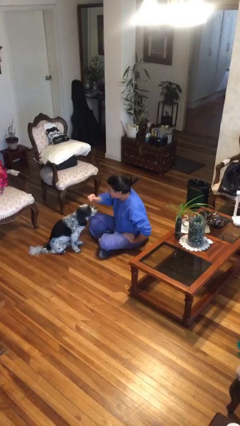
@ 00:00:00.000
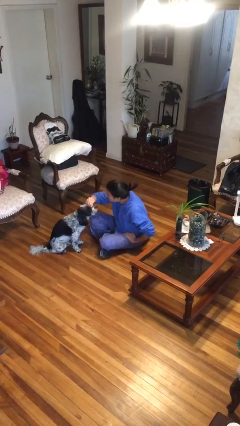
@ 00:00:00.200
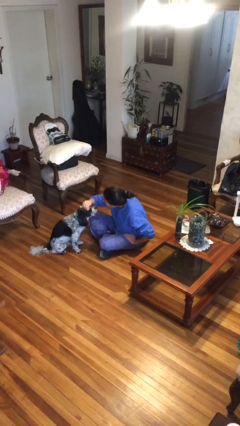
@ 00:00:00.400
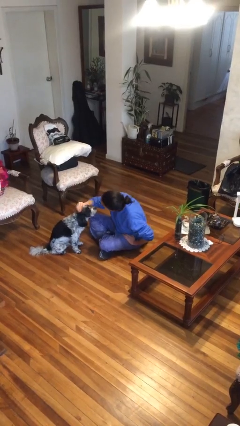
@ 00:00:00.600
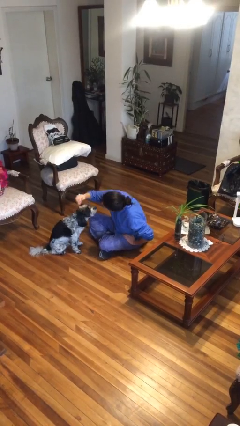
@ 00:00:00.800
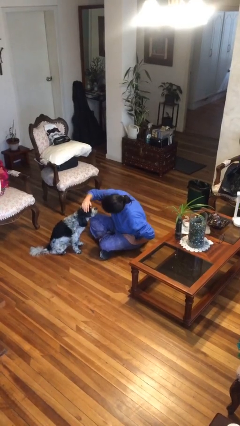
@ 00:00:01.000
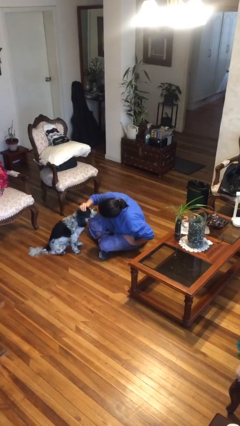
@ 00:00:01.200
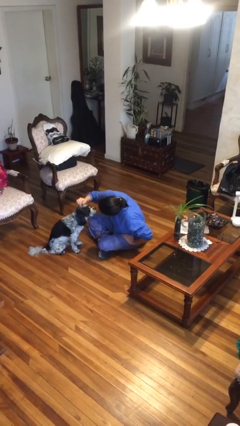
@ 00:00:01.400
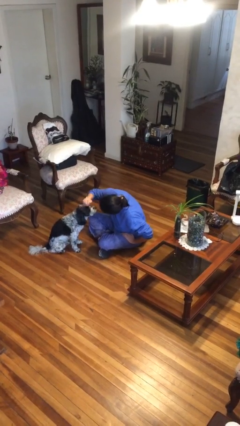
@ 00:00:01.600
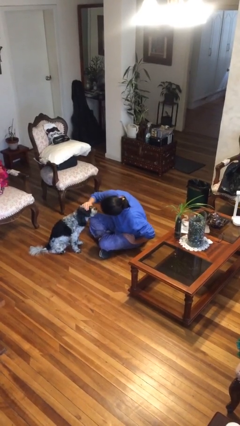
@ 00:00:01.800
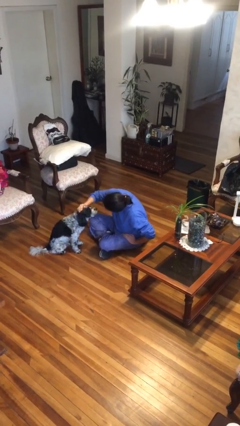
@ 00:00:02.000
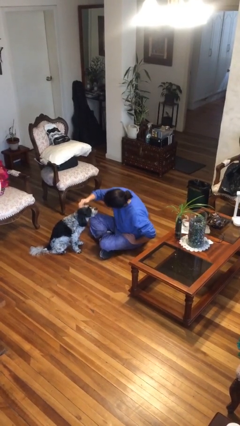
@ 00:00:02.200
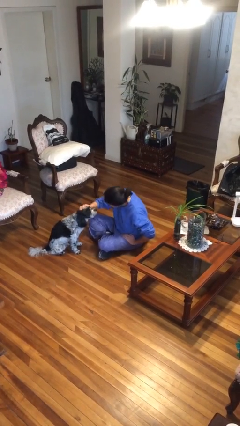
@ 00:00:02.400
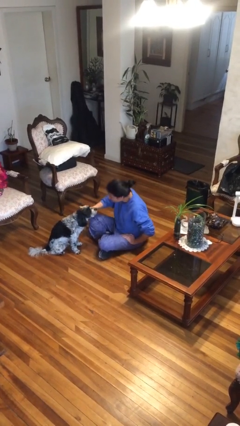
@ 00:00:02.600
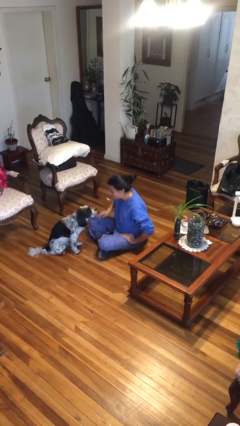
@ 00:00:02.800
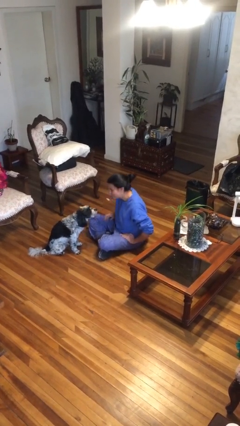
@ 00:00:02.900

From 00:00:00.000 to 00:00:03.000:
person pets dog

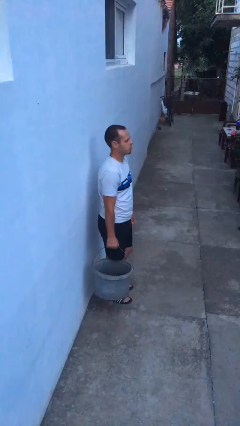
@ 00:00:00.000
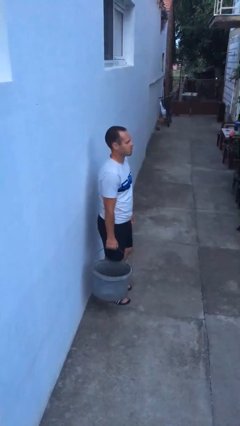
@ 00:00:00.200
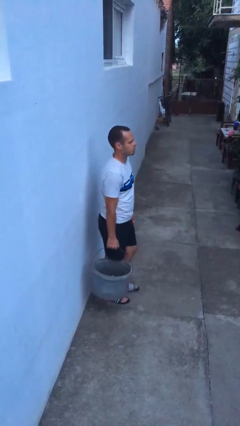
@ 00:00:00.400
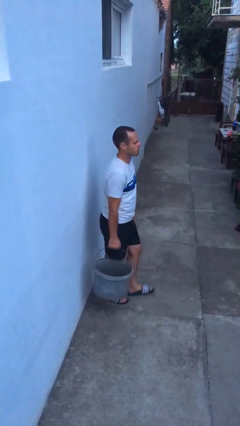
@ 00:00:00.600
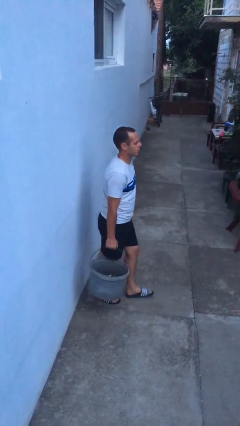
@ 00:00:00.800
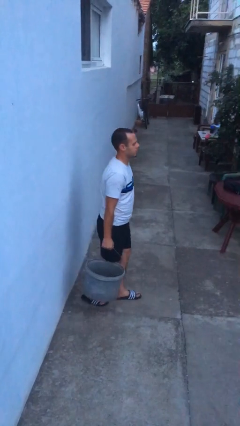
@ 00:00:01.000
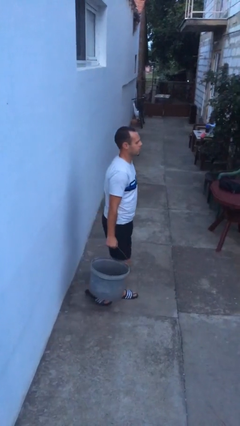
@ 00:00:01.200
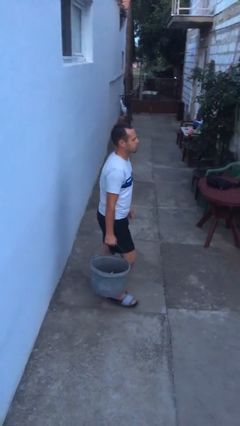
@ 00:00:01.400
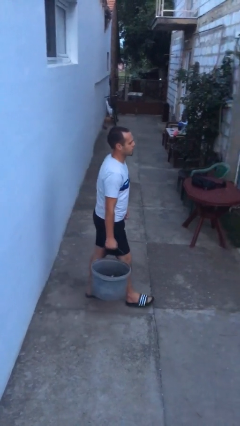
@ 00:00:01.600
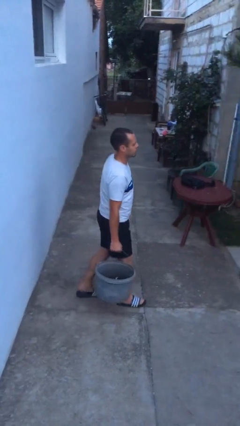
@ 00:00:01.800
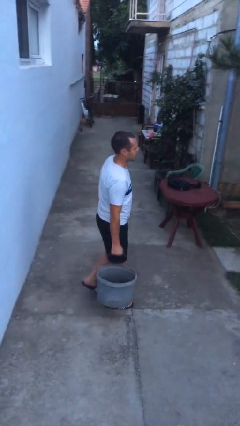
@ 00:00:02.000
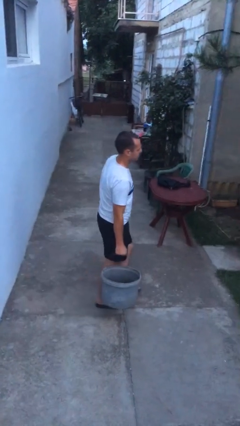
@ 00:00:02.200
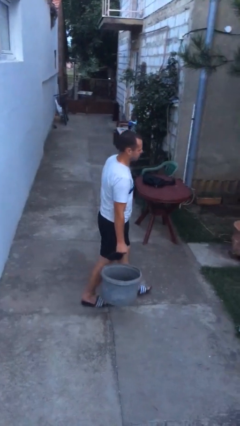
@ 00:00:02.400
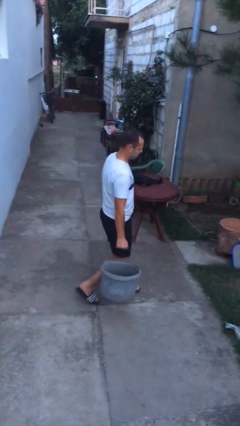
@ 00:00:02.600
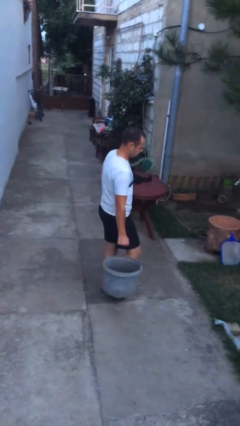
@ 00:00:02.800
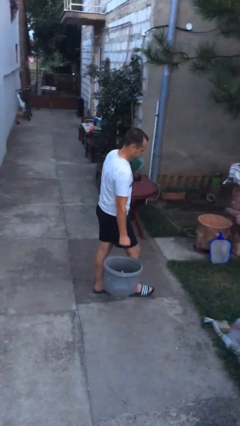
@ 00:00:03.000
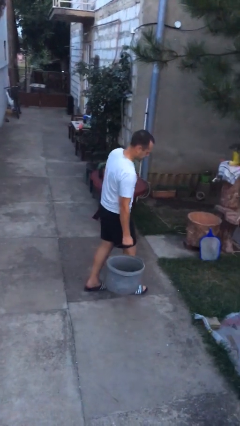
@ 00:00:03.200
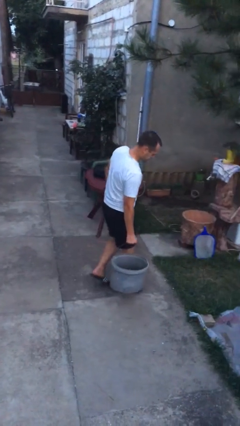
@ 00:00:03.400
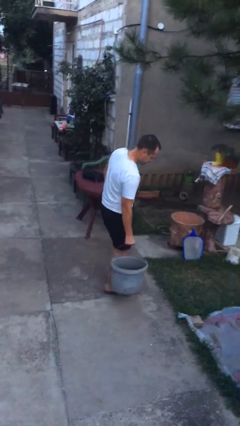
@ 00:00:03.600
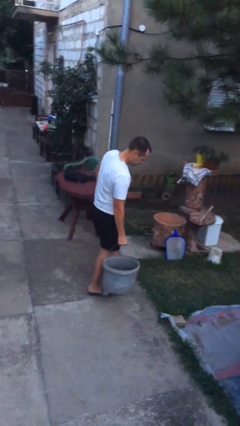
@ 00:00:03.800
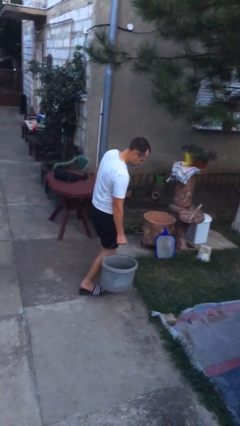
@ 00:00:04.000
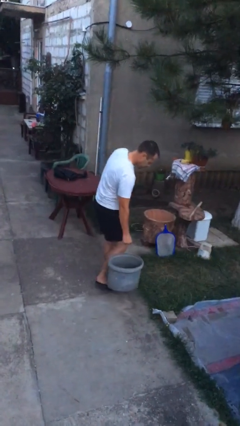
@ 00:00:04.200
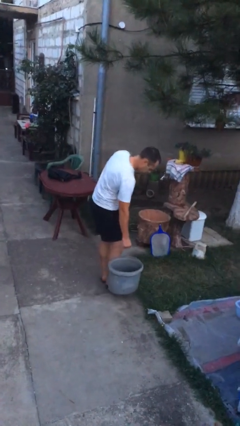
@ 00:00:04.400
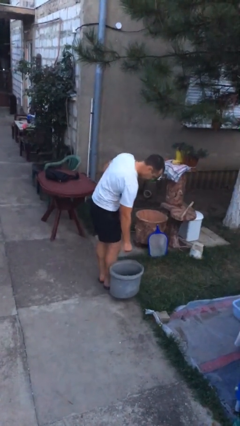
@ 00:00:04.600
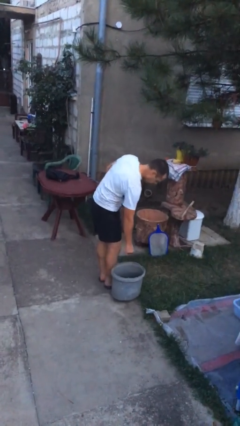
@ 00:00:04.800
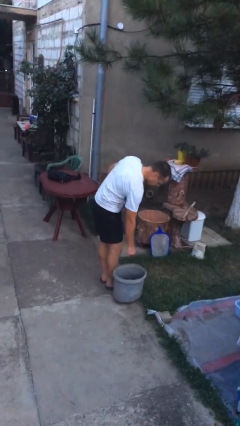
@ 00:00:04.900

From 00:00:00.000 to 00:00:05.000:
person carries heavy object

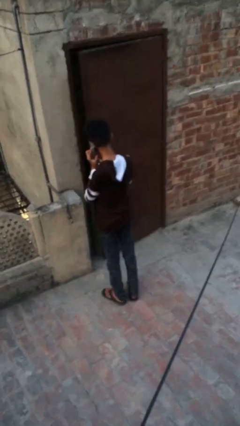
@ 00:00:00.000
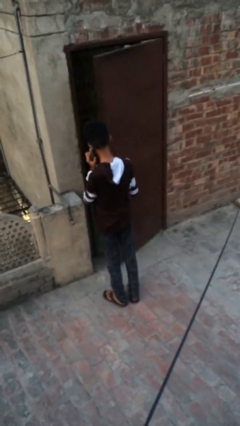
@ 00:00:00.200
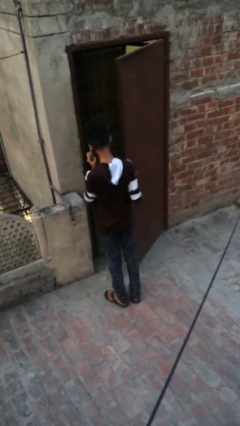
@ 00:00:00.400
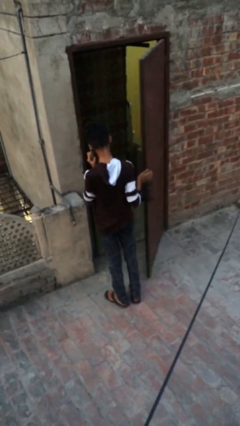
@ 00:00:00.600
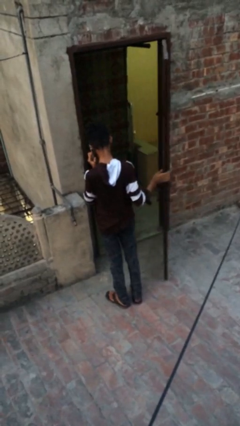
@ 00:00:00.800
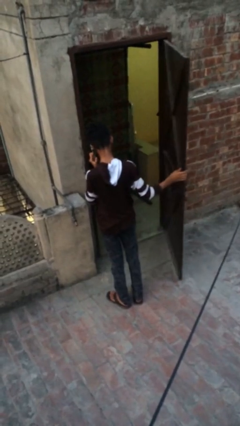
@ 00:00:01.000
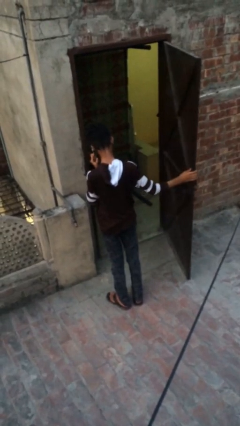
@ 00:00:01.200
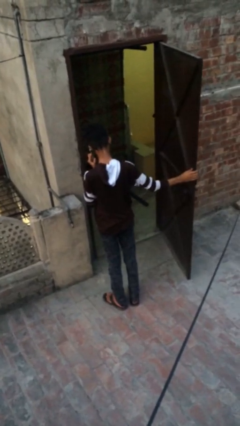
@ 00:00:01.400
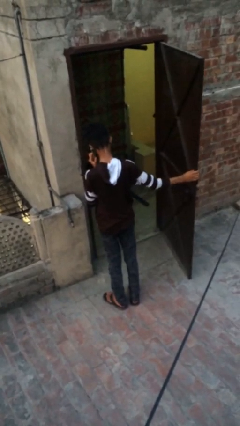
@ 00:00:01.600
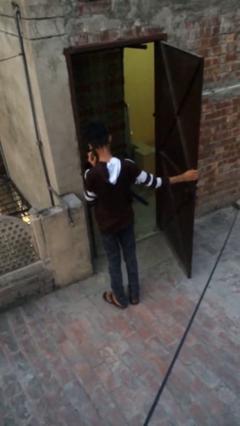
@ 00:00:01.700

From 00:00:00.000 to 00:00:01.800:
person opens facility door

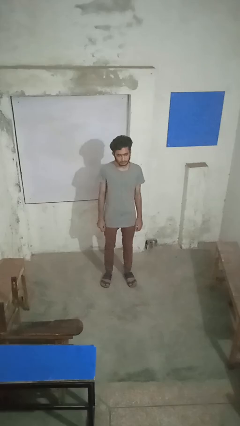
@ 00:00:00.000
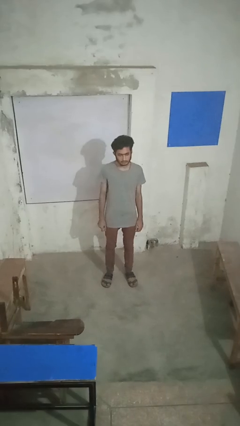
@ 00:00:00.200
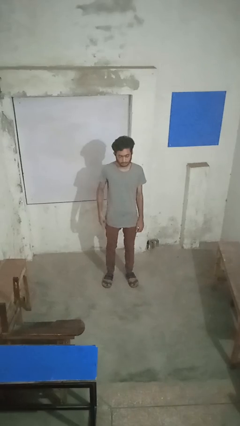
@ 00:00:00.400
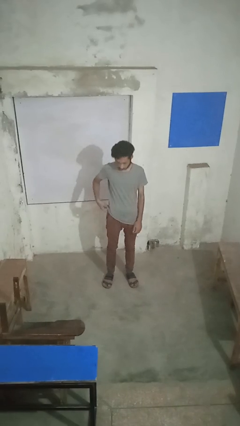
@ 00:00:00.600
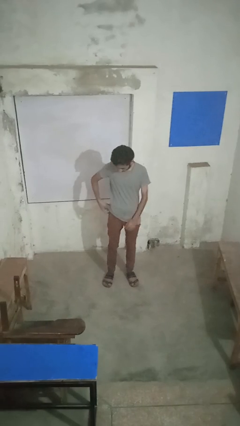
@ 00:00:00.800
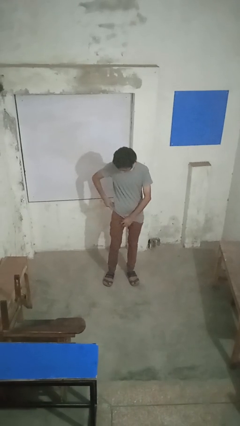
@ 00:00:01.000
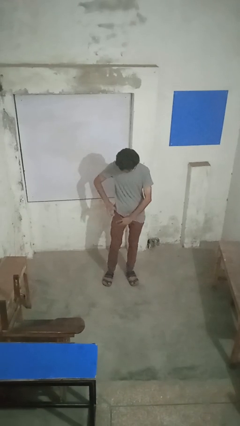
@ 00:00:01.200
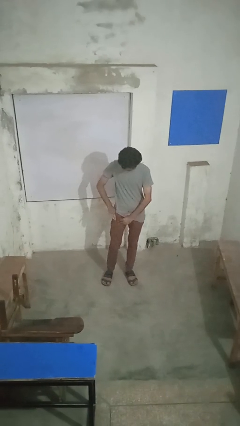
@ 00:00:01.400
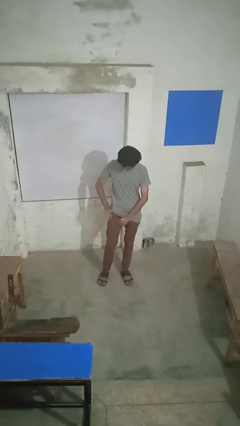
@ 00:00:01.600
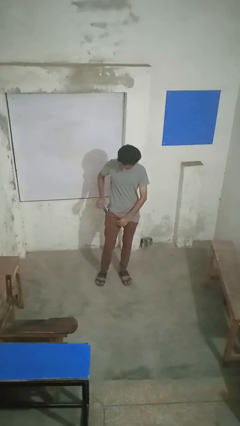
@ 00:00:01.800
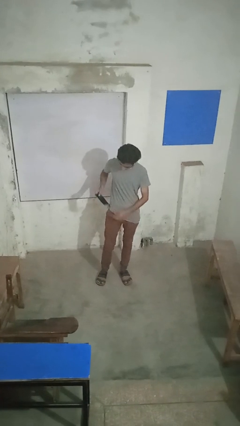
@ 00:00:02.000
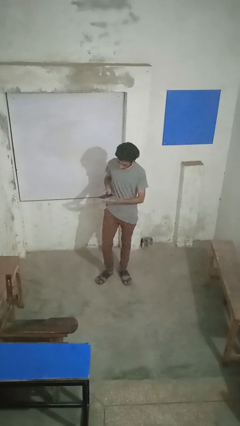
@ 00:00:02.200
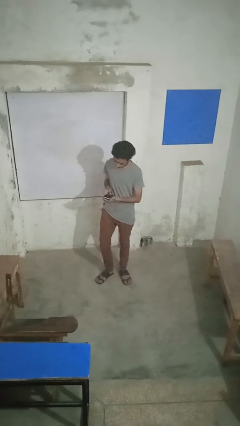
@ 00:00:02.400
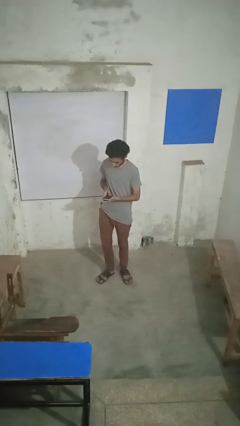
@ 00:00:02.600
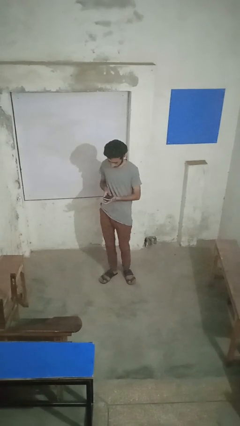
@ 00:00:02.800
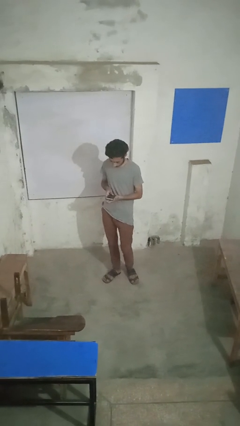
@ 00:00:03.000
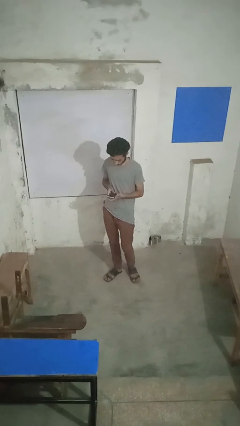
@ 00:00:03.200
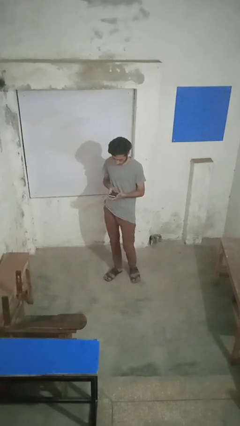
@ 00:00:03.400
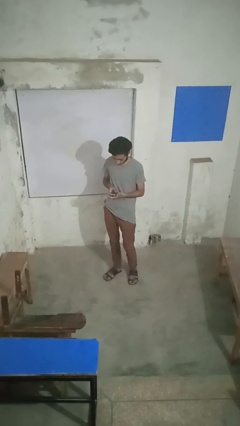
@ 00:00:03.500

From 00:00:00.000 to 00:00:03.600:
person takes phone from pocket

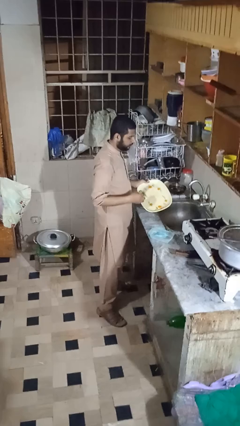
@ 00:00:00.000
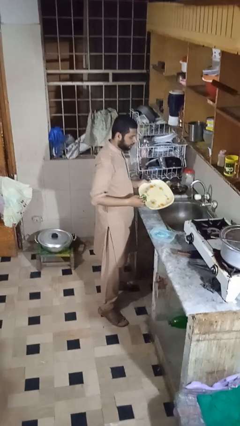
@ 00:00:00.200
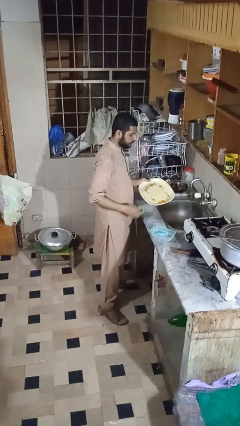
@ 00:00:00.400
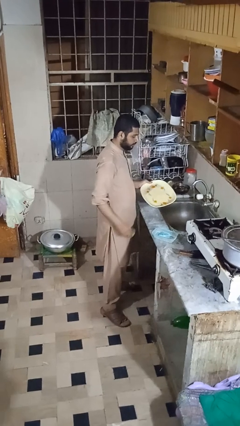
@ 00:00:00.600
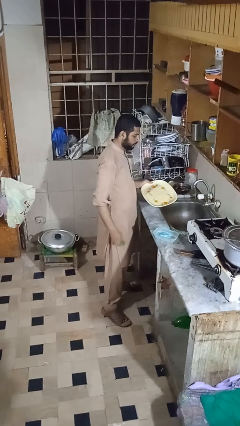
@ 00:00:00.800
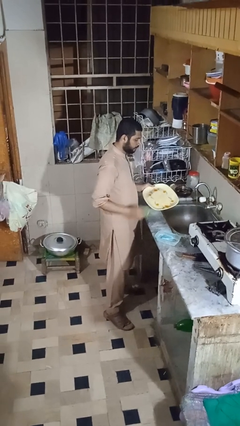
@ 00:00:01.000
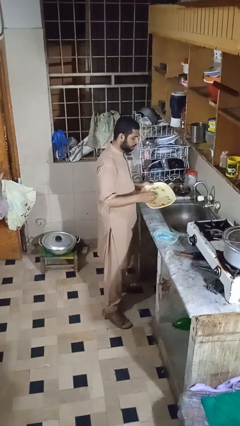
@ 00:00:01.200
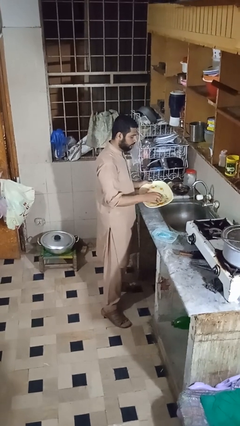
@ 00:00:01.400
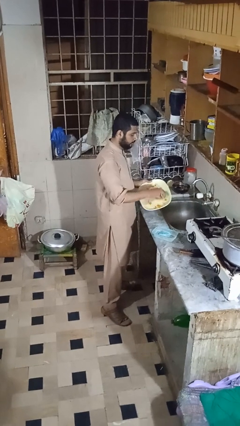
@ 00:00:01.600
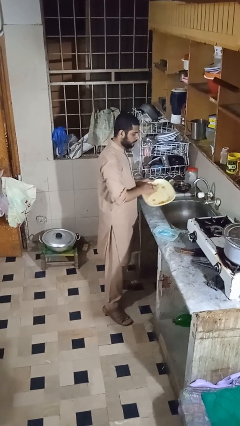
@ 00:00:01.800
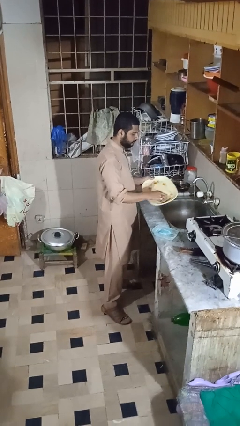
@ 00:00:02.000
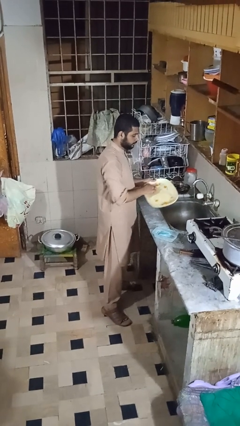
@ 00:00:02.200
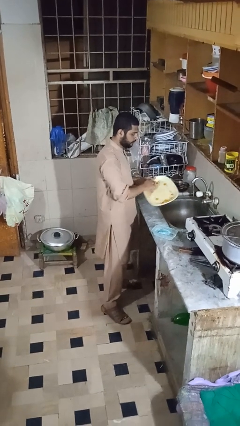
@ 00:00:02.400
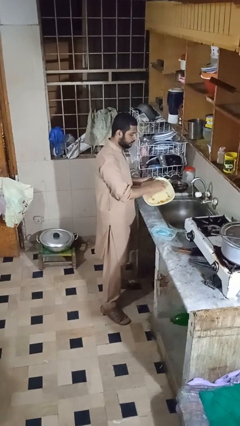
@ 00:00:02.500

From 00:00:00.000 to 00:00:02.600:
person washes dish

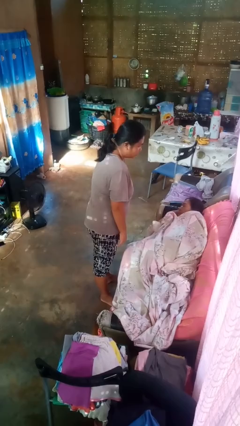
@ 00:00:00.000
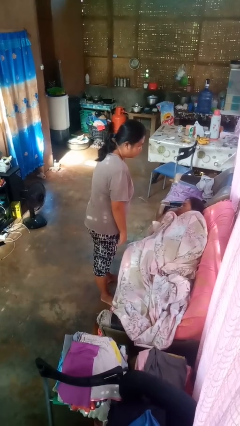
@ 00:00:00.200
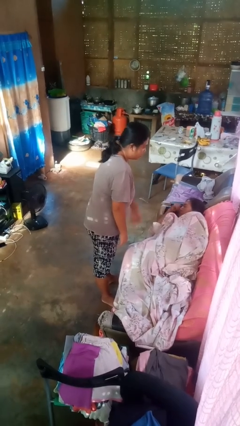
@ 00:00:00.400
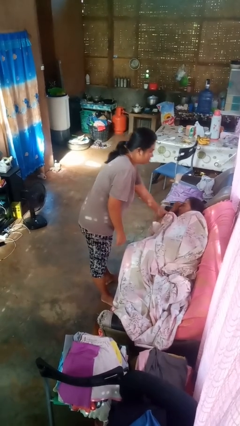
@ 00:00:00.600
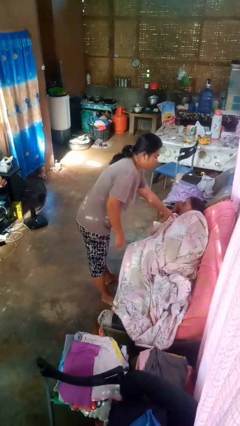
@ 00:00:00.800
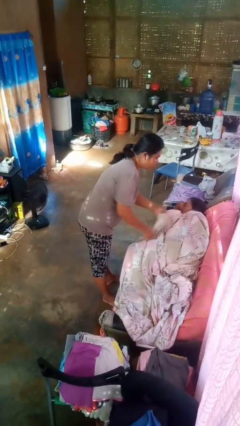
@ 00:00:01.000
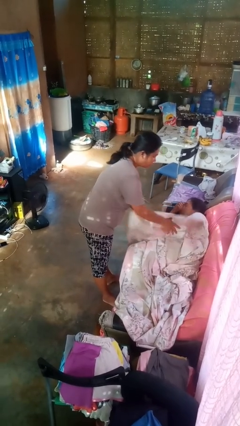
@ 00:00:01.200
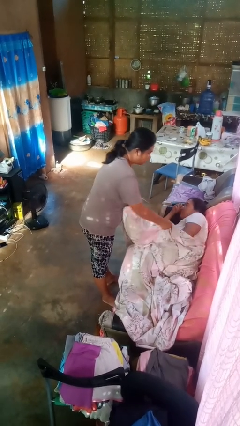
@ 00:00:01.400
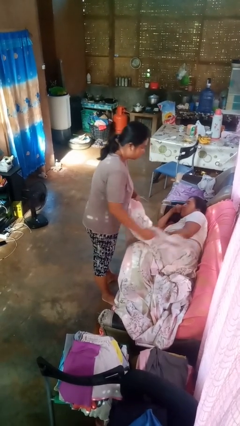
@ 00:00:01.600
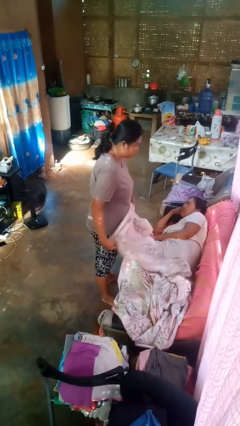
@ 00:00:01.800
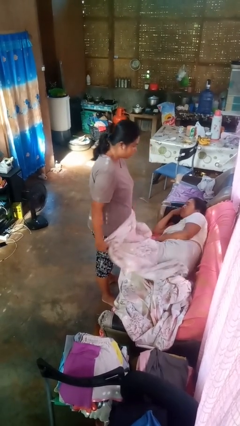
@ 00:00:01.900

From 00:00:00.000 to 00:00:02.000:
person uncovers friend with blanket
